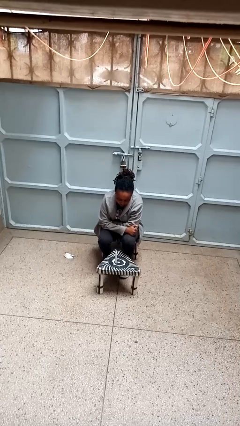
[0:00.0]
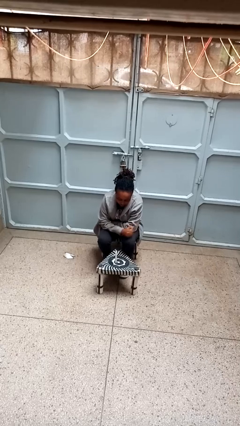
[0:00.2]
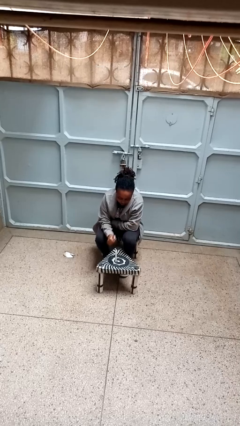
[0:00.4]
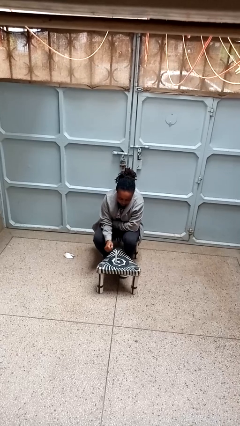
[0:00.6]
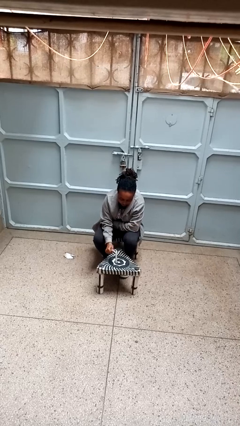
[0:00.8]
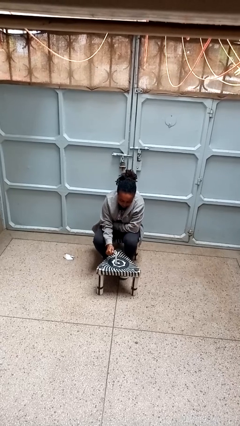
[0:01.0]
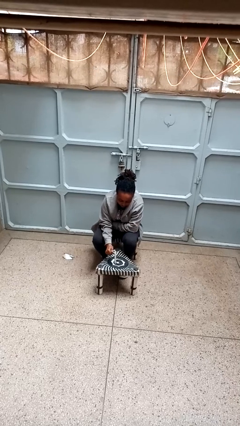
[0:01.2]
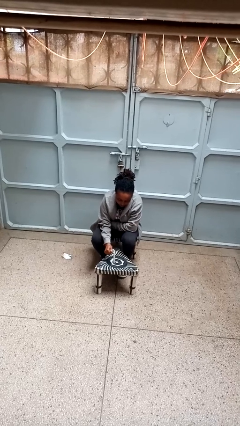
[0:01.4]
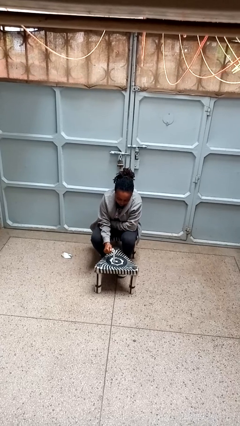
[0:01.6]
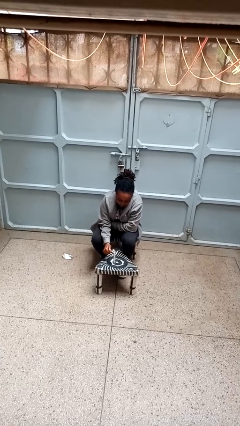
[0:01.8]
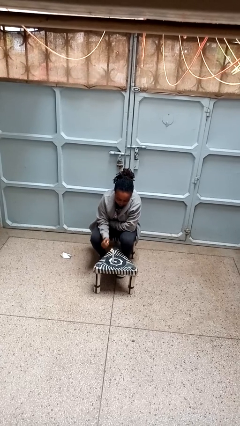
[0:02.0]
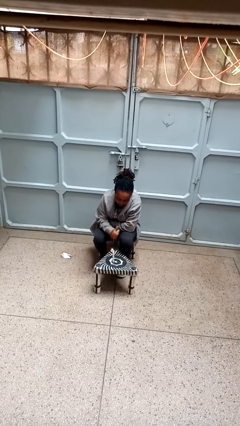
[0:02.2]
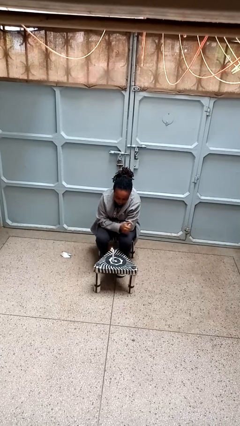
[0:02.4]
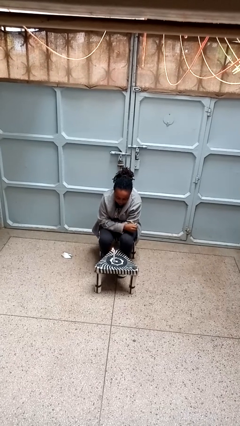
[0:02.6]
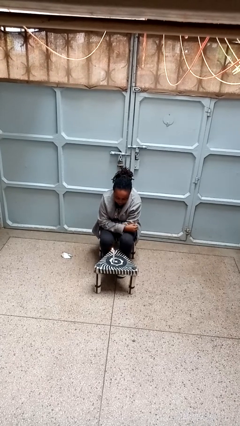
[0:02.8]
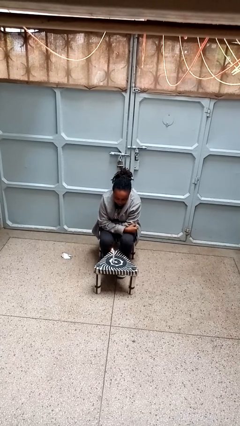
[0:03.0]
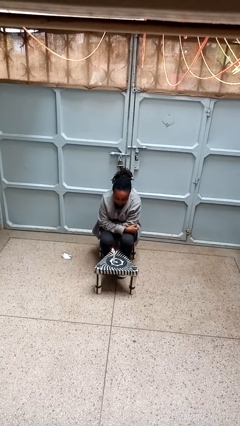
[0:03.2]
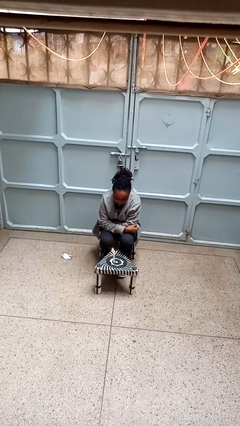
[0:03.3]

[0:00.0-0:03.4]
person lights candle

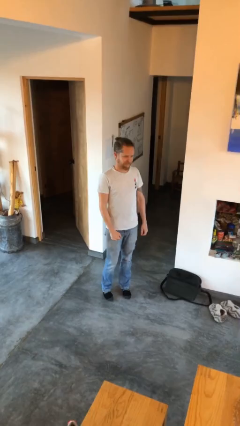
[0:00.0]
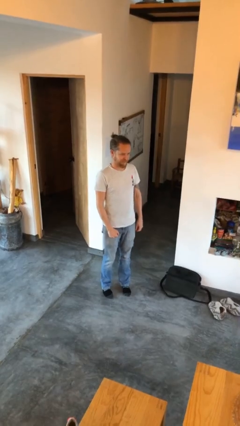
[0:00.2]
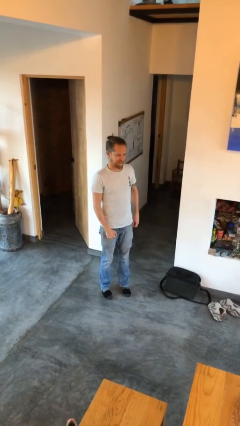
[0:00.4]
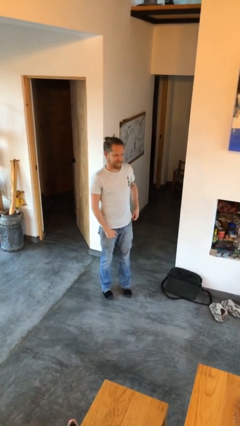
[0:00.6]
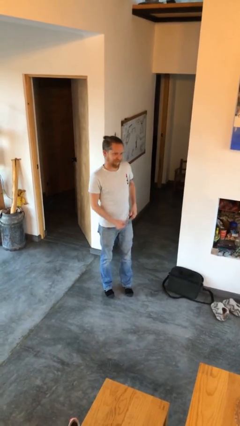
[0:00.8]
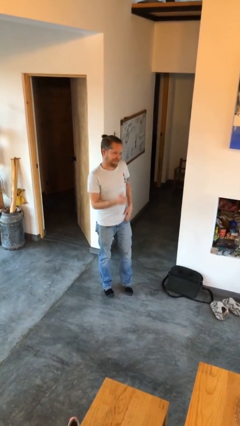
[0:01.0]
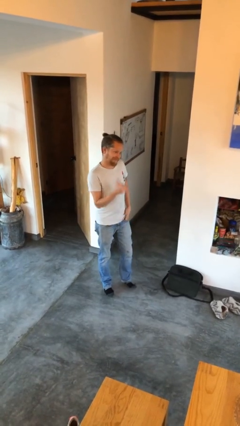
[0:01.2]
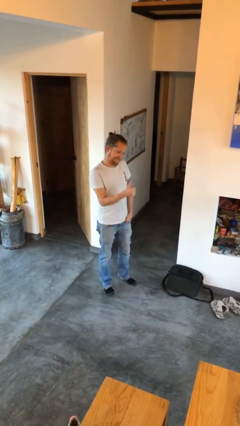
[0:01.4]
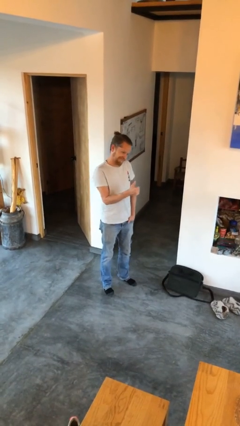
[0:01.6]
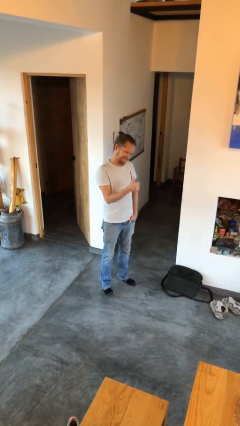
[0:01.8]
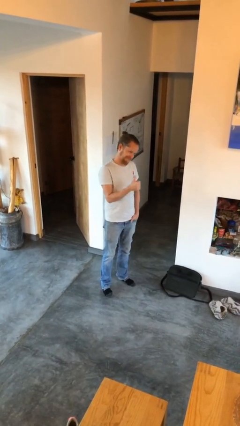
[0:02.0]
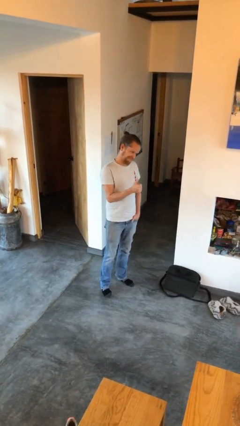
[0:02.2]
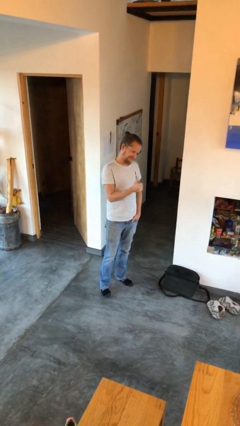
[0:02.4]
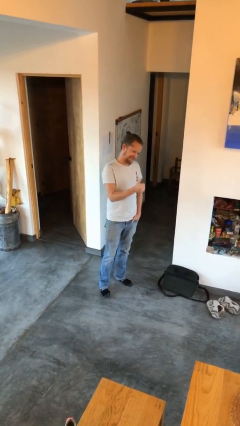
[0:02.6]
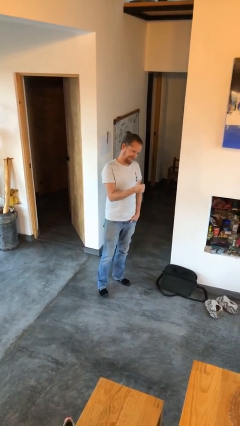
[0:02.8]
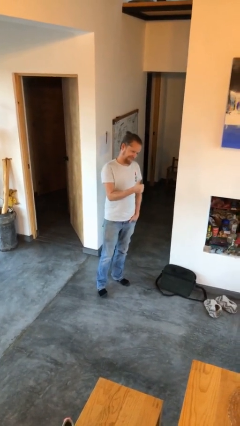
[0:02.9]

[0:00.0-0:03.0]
person gestures thumbs up

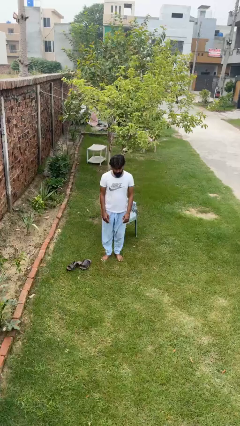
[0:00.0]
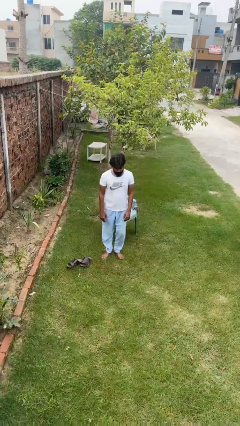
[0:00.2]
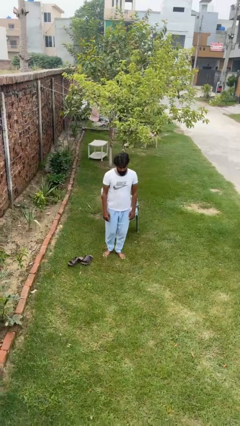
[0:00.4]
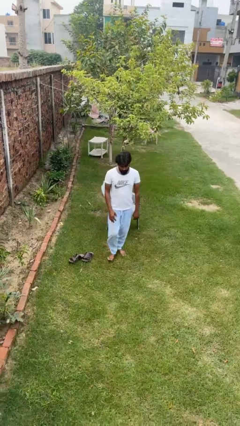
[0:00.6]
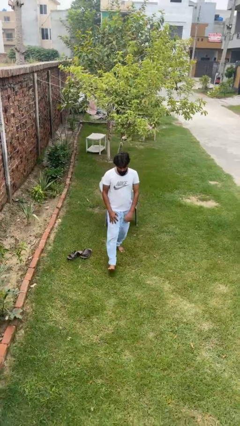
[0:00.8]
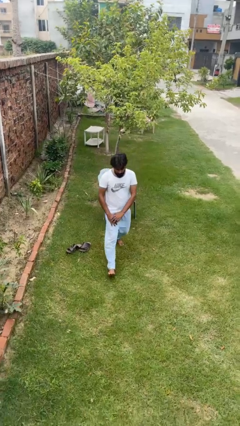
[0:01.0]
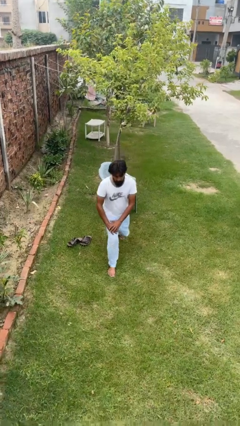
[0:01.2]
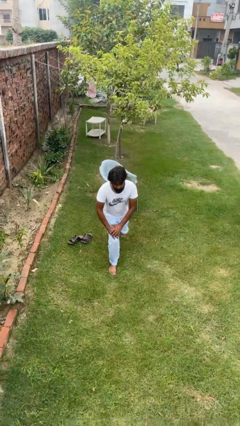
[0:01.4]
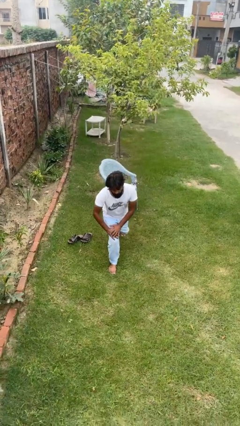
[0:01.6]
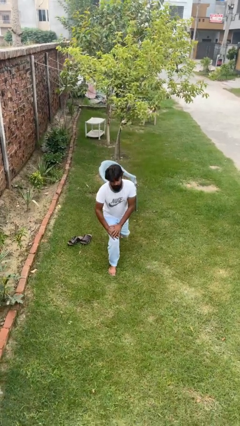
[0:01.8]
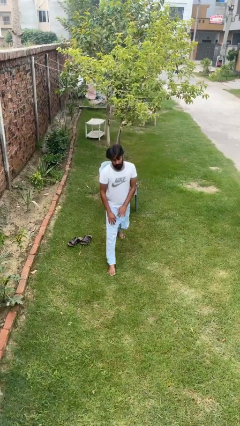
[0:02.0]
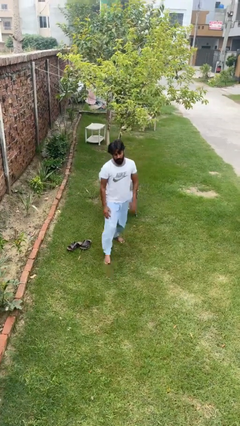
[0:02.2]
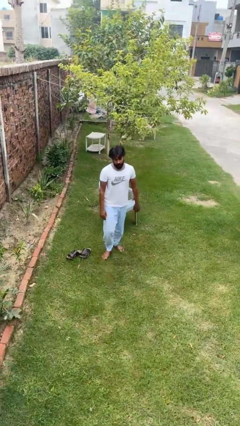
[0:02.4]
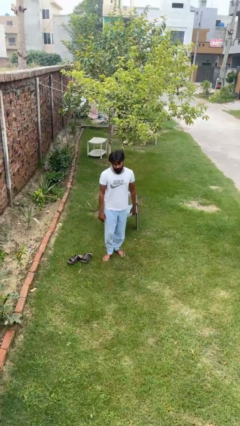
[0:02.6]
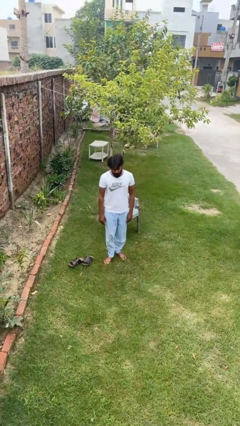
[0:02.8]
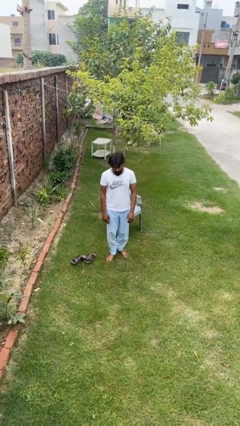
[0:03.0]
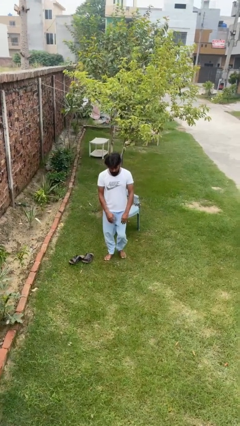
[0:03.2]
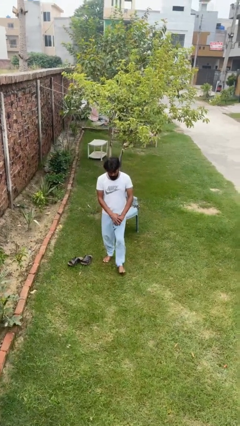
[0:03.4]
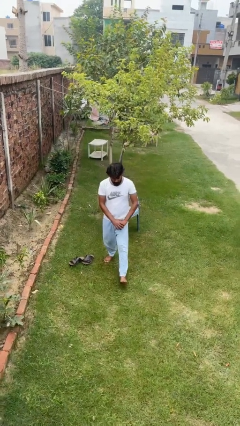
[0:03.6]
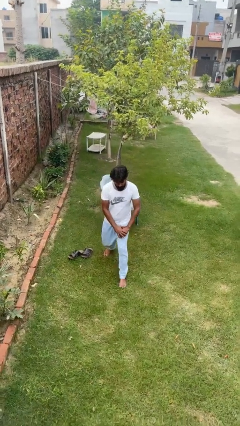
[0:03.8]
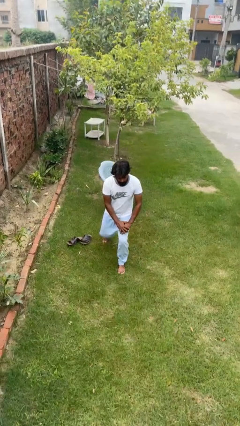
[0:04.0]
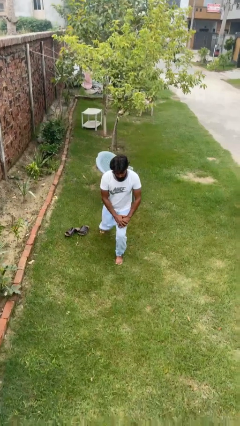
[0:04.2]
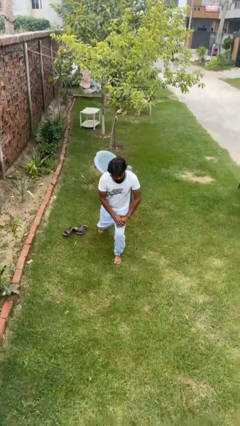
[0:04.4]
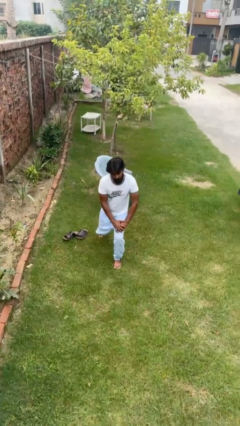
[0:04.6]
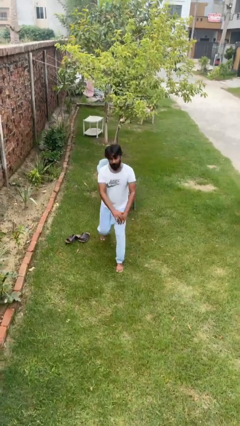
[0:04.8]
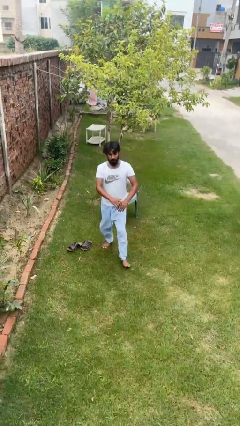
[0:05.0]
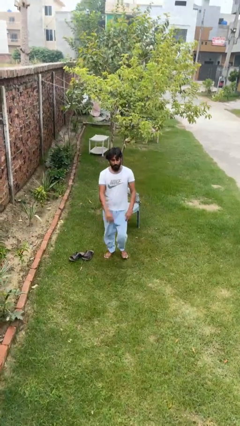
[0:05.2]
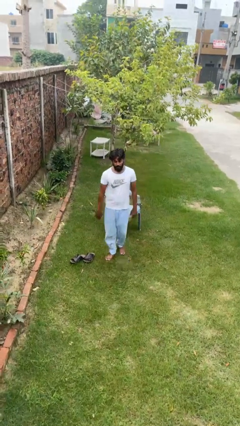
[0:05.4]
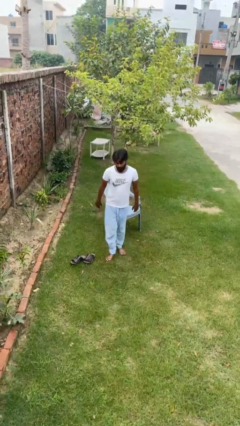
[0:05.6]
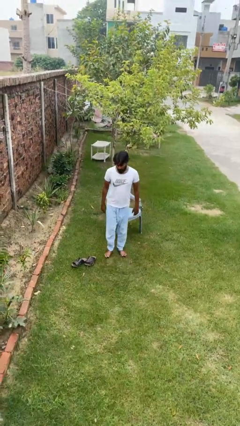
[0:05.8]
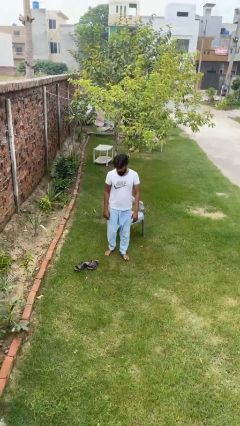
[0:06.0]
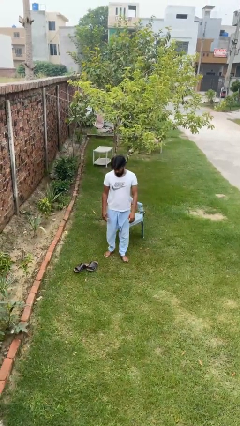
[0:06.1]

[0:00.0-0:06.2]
person exercises with lunges

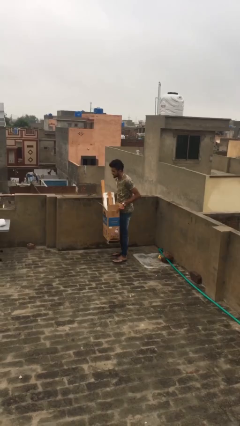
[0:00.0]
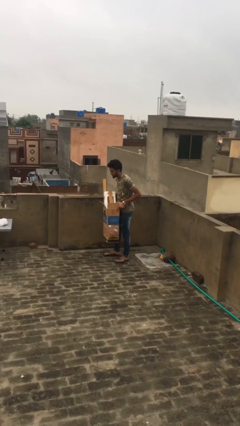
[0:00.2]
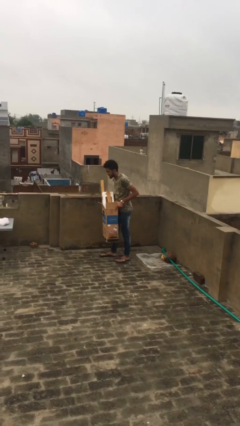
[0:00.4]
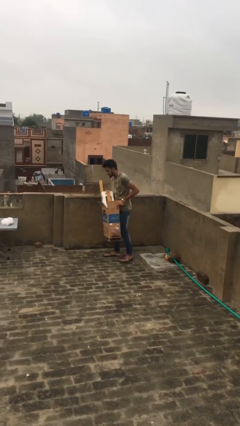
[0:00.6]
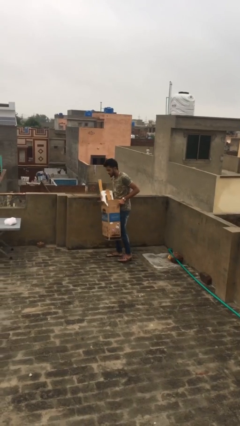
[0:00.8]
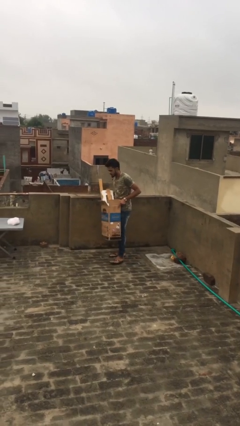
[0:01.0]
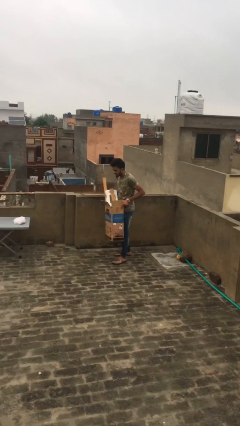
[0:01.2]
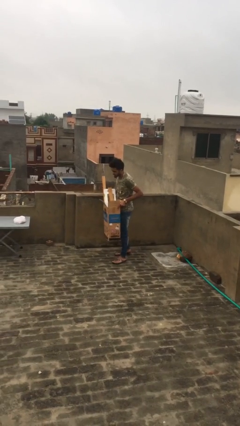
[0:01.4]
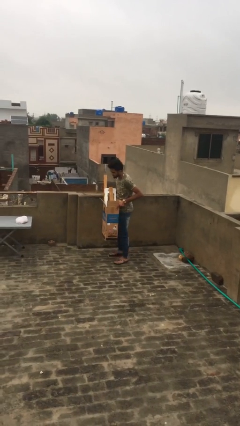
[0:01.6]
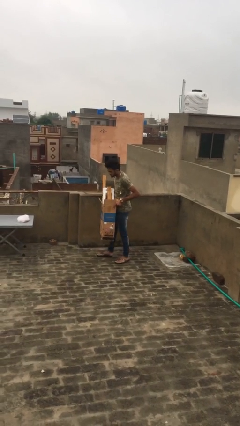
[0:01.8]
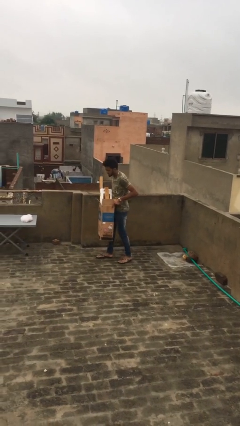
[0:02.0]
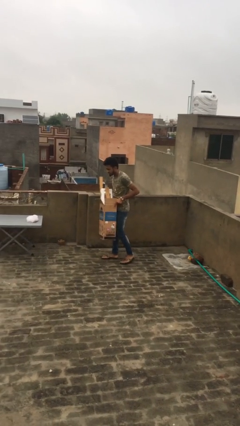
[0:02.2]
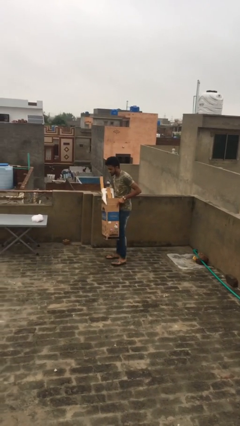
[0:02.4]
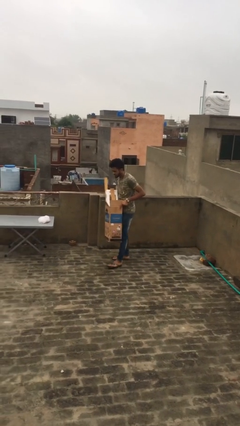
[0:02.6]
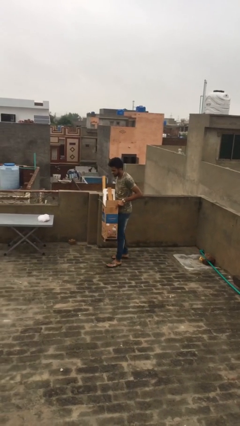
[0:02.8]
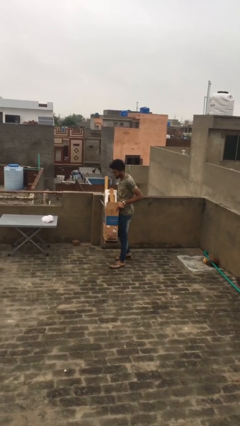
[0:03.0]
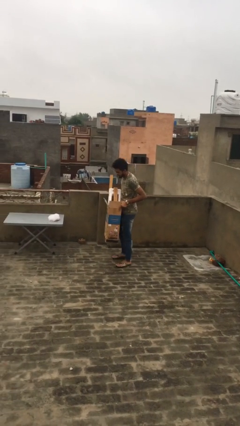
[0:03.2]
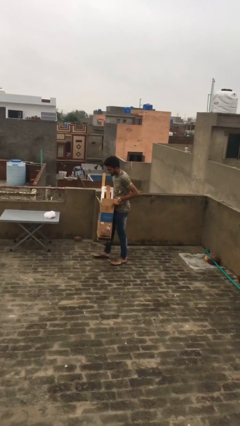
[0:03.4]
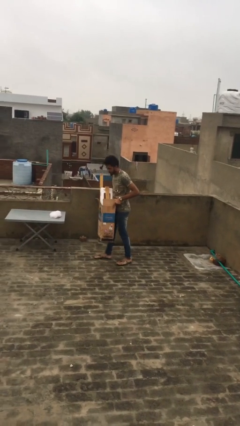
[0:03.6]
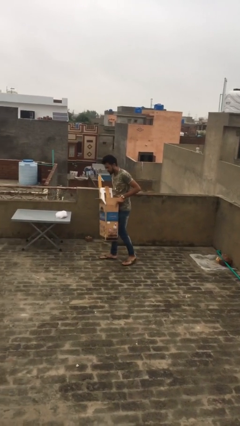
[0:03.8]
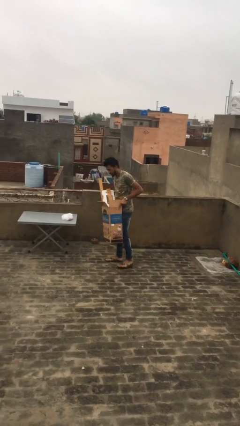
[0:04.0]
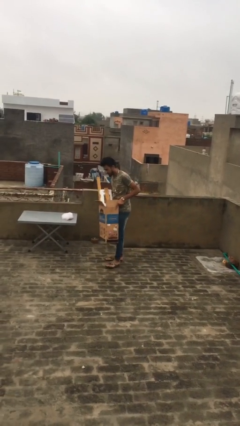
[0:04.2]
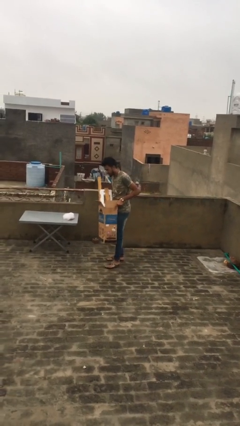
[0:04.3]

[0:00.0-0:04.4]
person carries heavy object

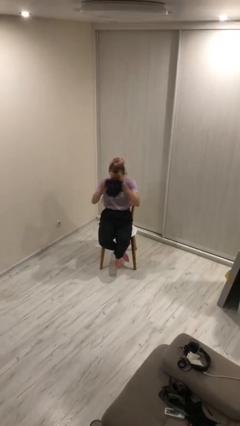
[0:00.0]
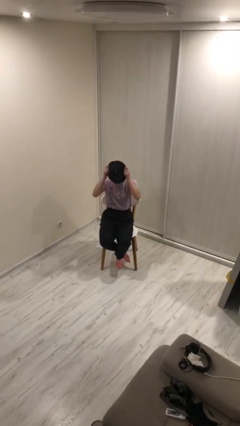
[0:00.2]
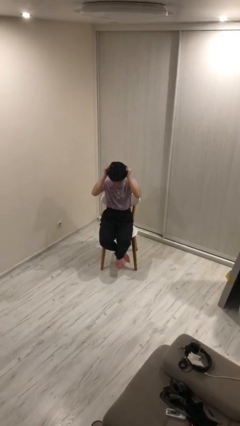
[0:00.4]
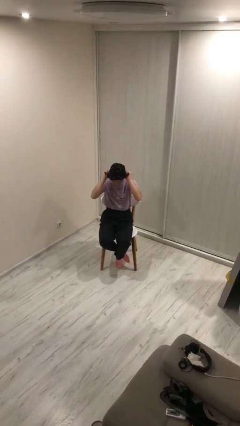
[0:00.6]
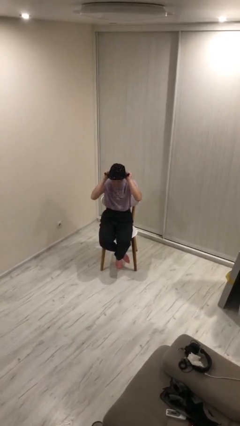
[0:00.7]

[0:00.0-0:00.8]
person puts on hat
